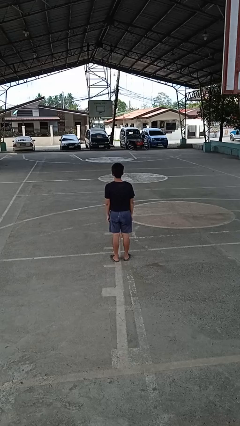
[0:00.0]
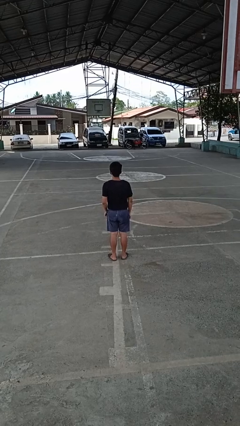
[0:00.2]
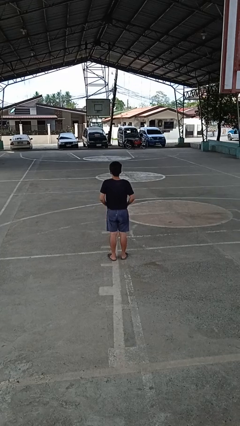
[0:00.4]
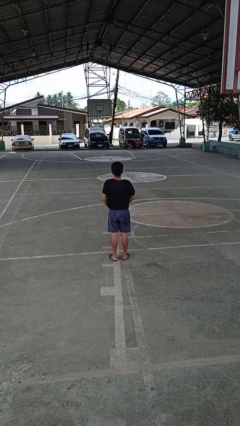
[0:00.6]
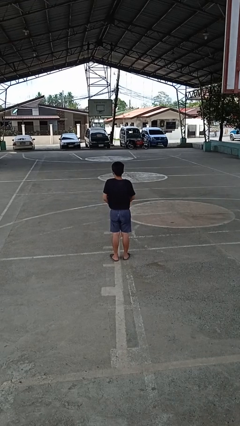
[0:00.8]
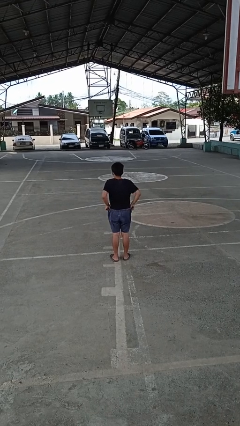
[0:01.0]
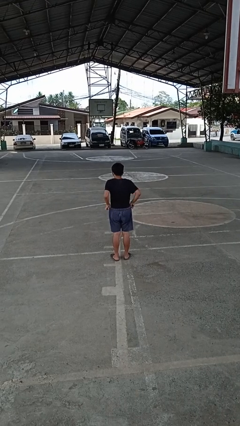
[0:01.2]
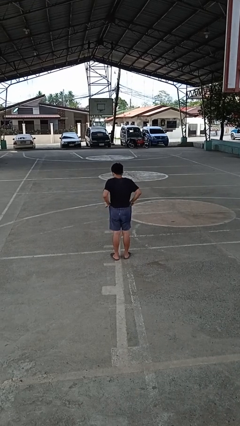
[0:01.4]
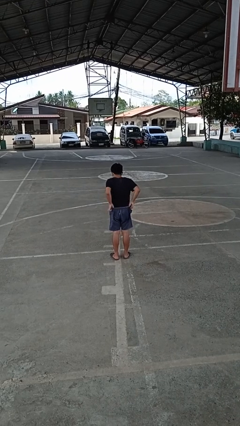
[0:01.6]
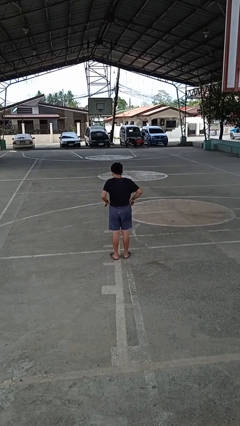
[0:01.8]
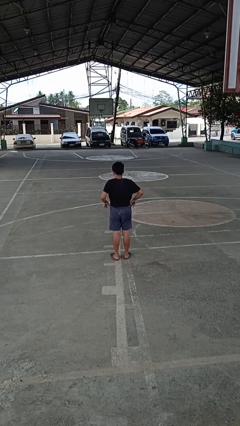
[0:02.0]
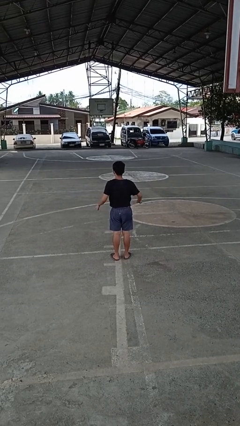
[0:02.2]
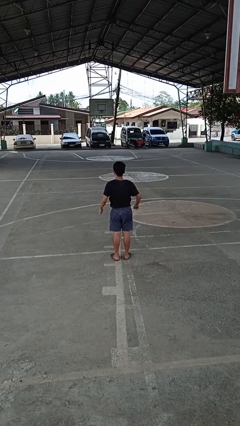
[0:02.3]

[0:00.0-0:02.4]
person hikes up pants

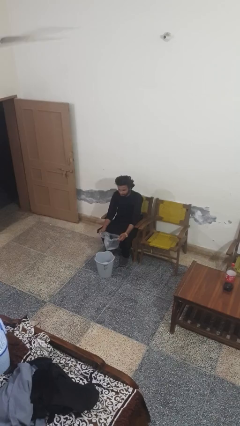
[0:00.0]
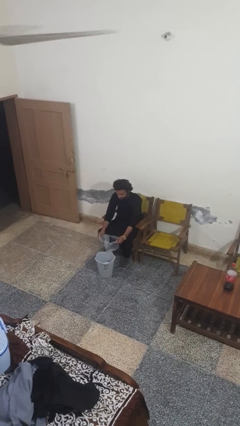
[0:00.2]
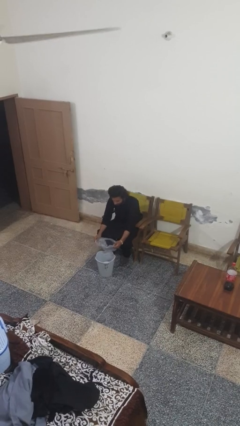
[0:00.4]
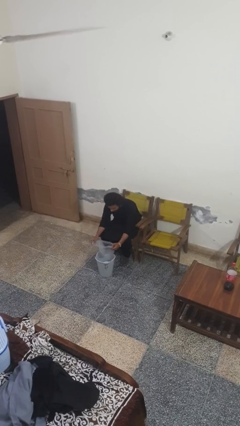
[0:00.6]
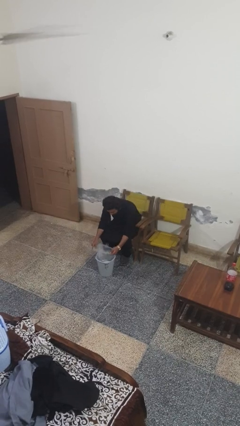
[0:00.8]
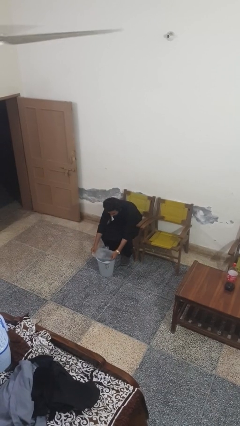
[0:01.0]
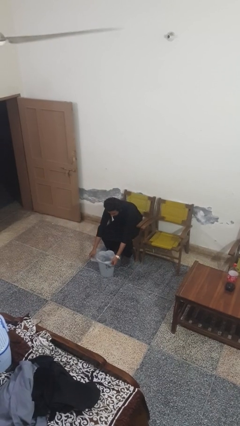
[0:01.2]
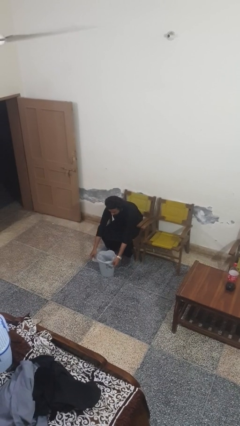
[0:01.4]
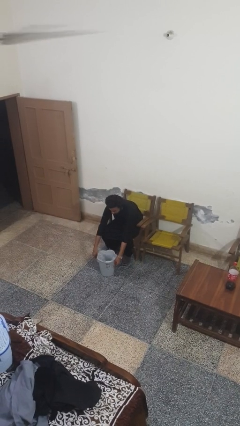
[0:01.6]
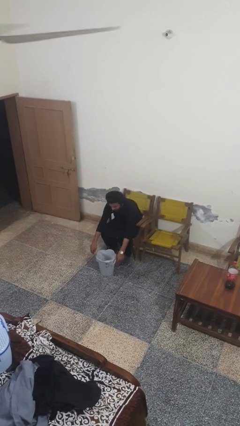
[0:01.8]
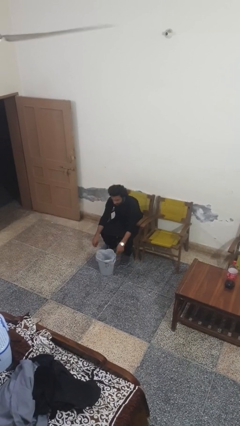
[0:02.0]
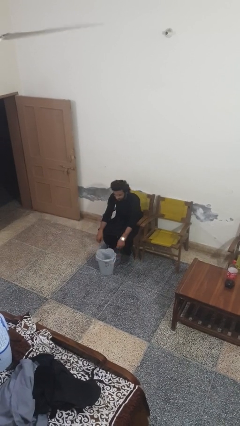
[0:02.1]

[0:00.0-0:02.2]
person inserts trashbag into trashcan

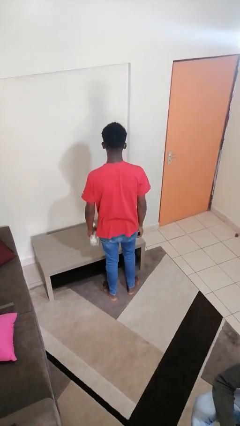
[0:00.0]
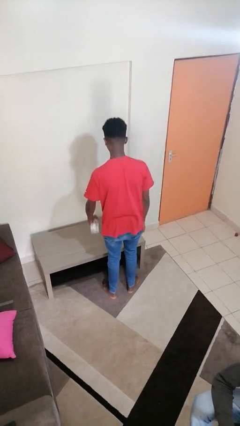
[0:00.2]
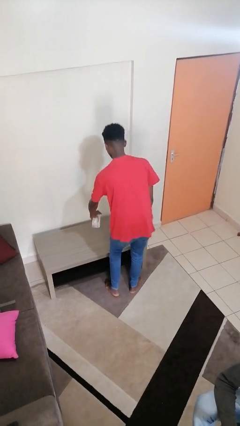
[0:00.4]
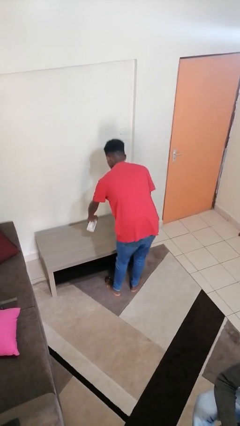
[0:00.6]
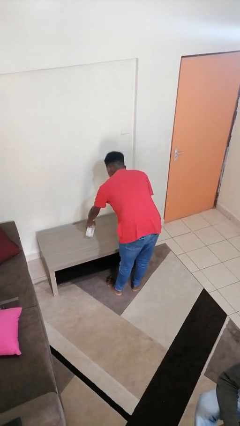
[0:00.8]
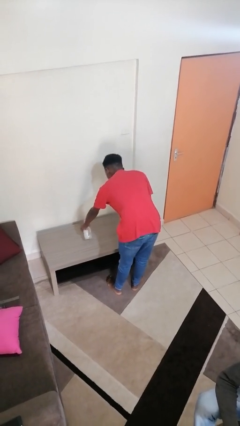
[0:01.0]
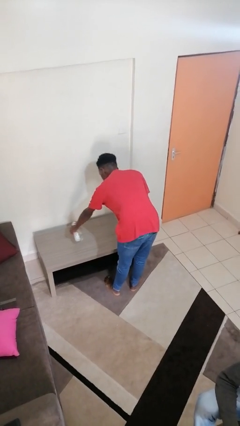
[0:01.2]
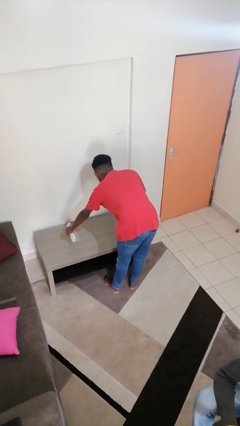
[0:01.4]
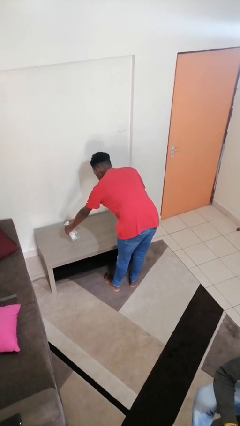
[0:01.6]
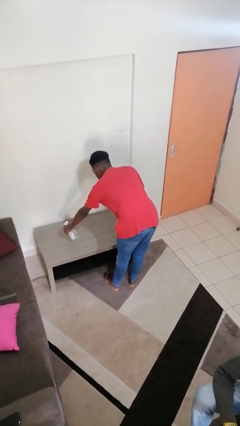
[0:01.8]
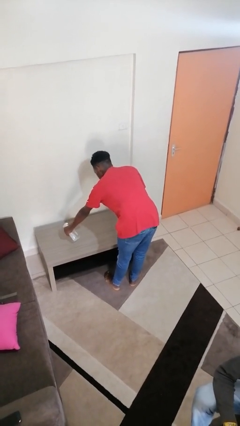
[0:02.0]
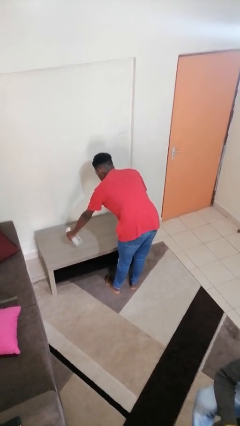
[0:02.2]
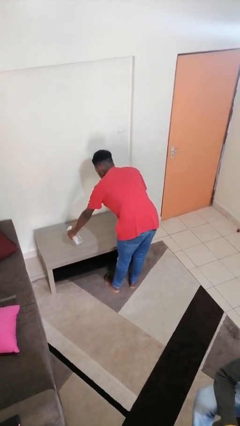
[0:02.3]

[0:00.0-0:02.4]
person sprays from bottle

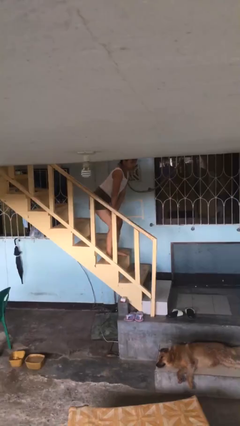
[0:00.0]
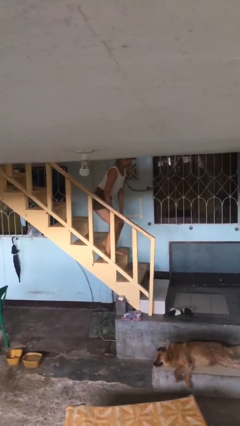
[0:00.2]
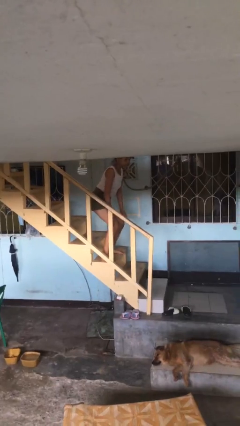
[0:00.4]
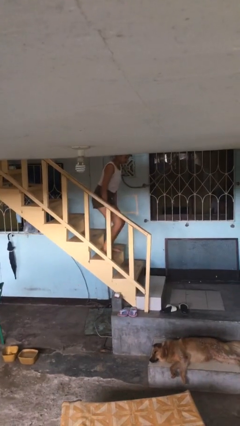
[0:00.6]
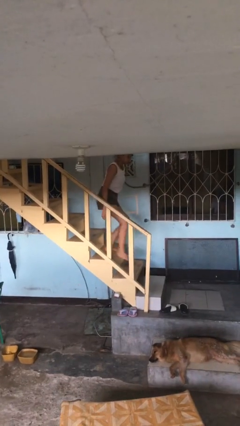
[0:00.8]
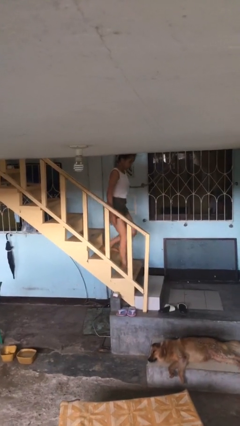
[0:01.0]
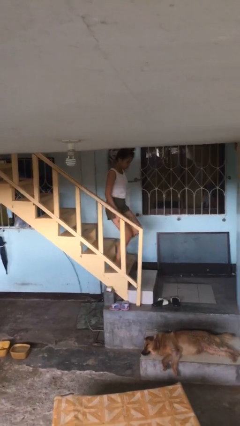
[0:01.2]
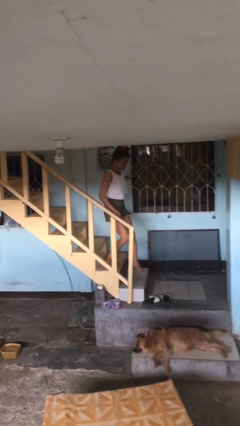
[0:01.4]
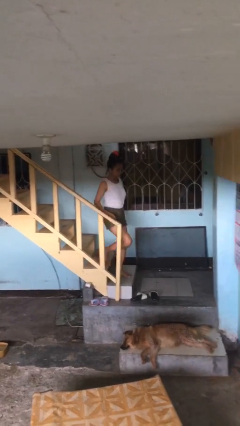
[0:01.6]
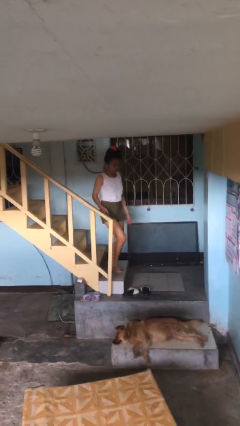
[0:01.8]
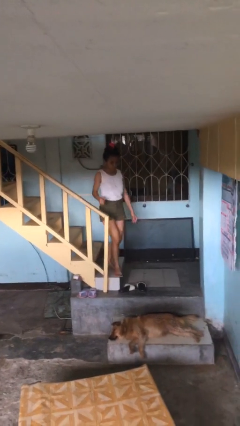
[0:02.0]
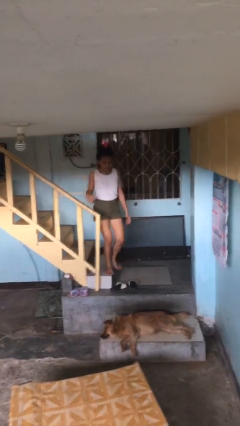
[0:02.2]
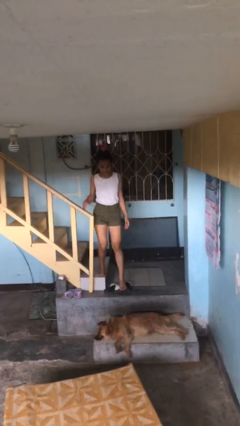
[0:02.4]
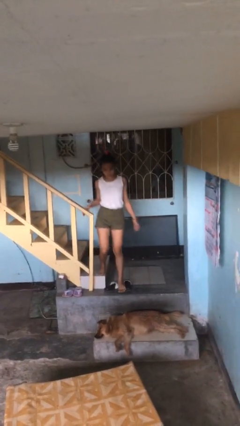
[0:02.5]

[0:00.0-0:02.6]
person climbs down stairs

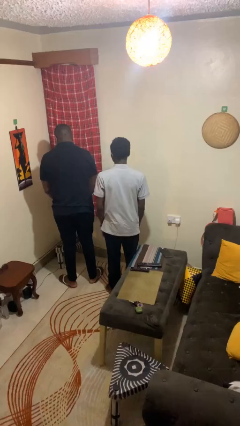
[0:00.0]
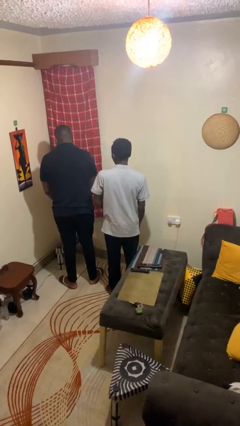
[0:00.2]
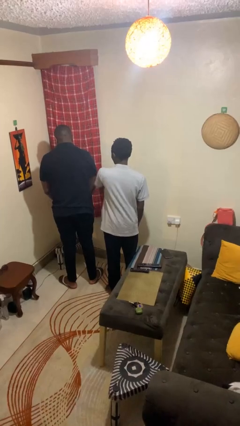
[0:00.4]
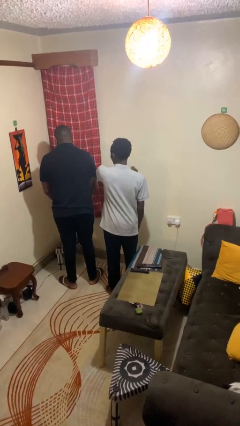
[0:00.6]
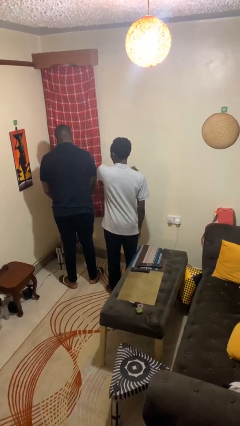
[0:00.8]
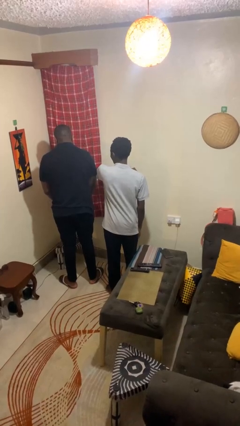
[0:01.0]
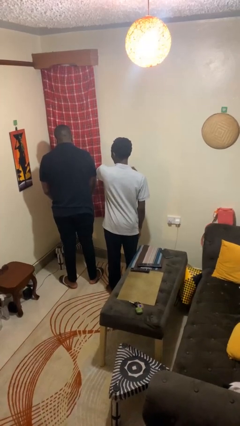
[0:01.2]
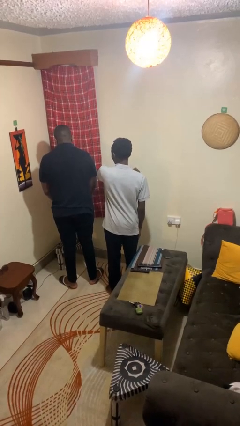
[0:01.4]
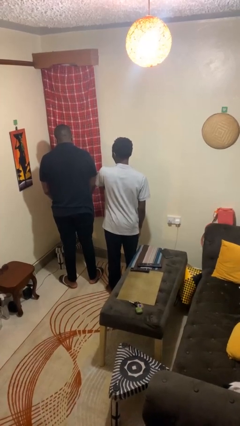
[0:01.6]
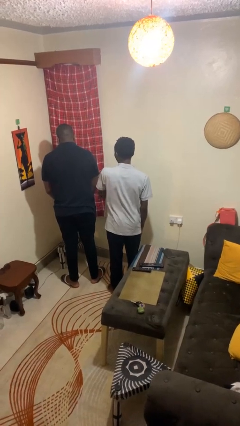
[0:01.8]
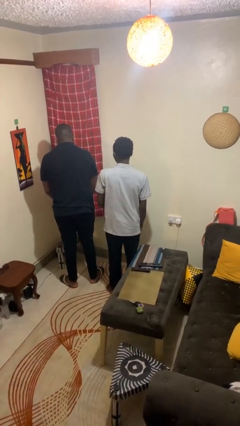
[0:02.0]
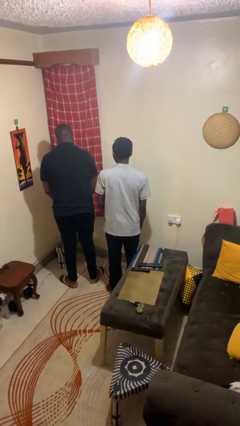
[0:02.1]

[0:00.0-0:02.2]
person nudges person with elbow

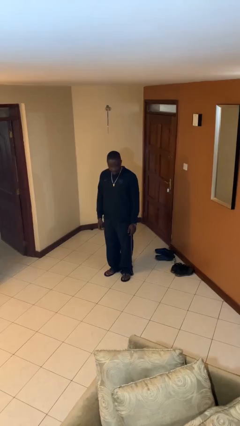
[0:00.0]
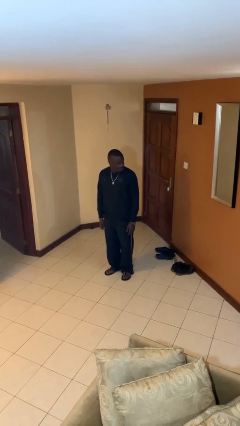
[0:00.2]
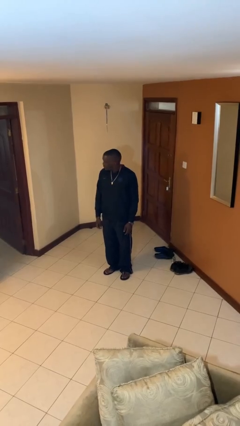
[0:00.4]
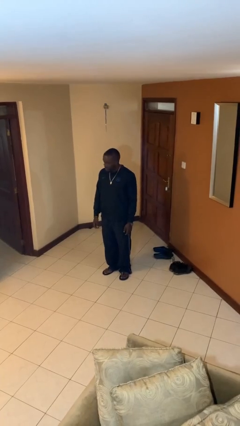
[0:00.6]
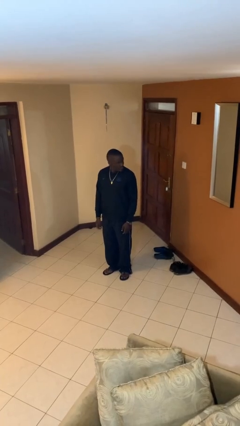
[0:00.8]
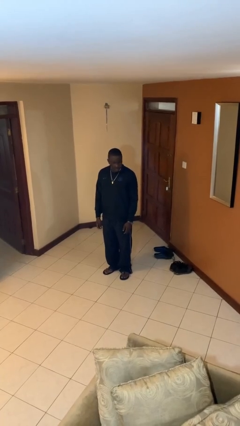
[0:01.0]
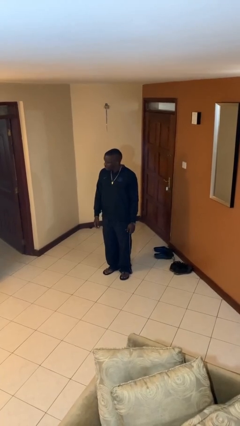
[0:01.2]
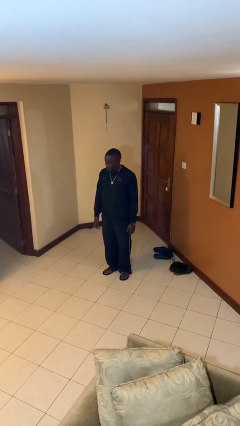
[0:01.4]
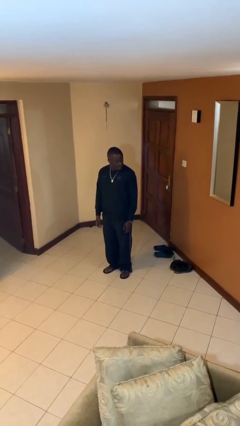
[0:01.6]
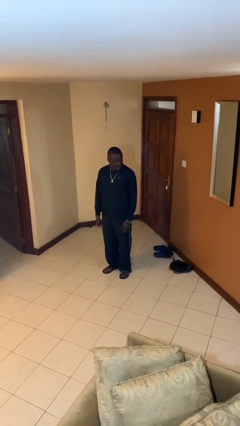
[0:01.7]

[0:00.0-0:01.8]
person shakes head

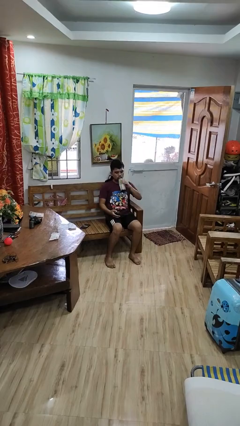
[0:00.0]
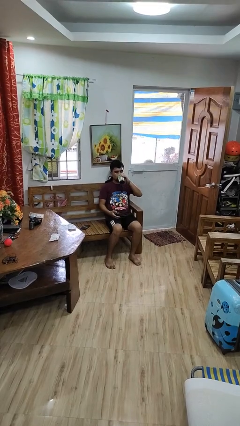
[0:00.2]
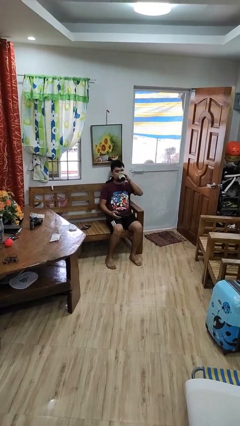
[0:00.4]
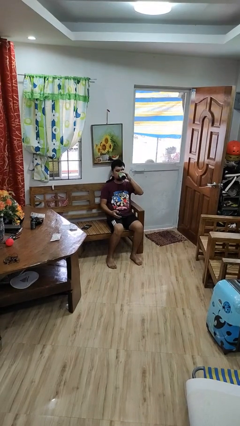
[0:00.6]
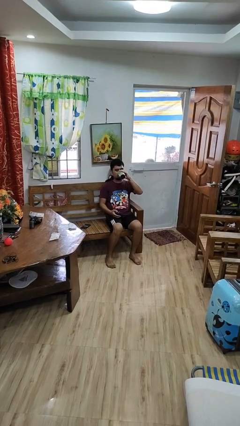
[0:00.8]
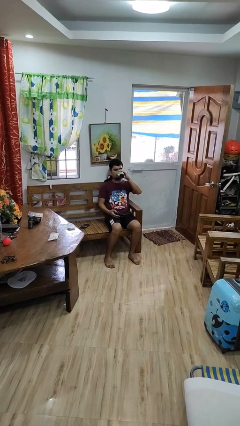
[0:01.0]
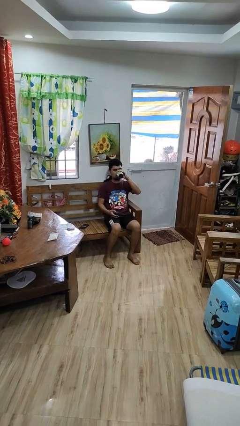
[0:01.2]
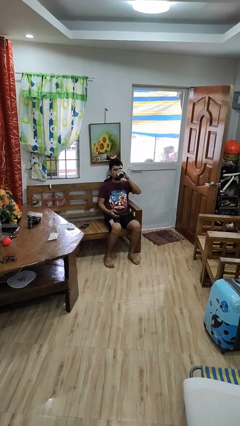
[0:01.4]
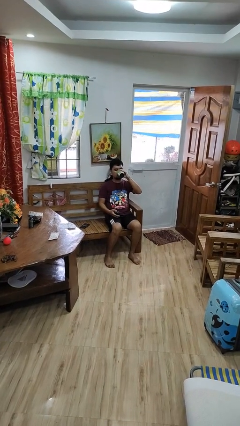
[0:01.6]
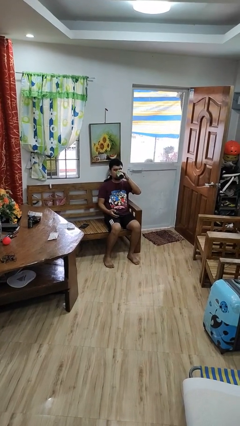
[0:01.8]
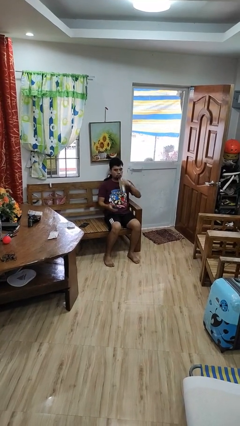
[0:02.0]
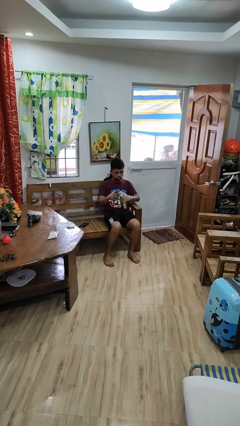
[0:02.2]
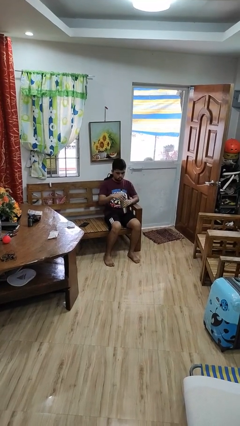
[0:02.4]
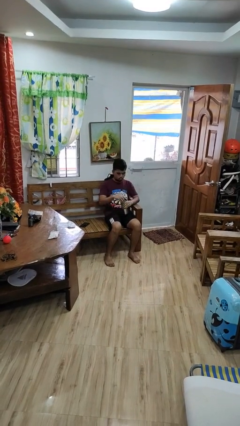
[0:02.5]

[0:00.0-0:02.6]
person drinks from bottle
